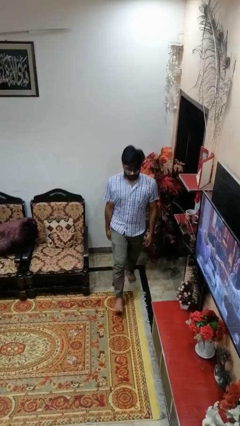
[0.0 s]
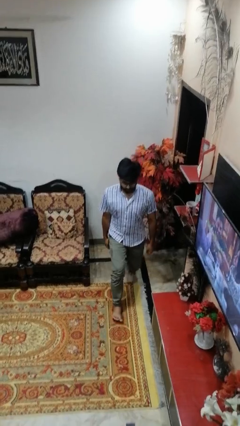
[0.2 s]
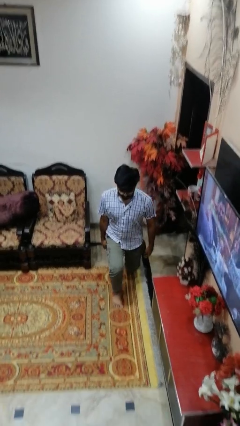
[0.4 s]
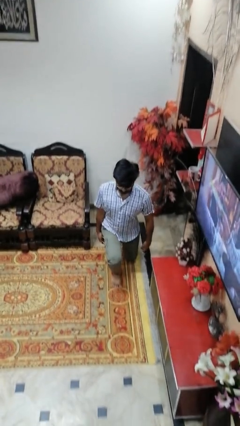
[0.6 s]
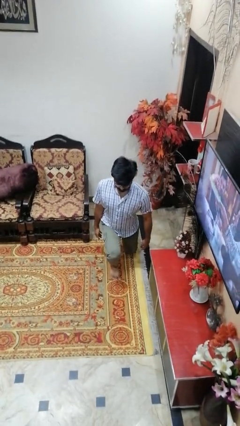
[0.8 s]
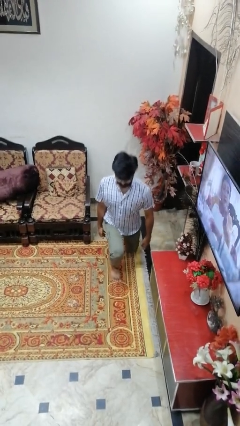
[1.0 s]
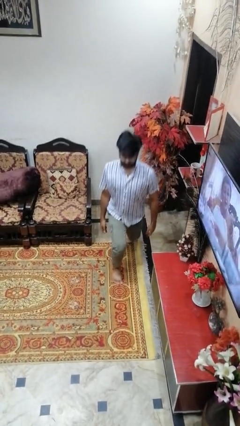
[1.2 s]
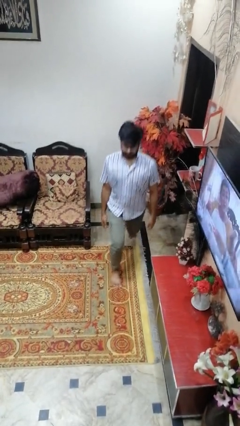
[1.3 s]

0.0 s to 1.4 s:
person exercises with lunges

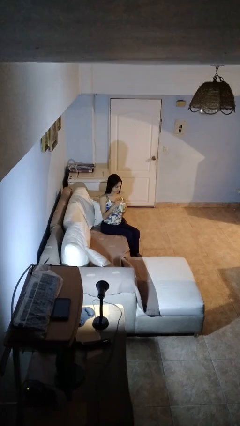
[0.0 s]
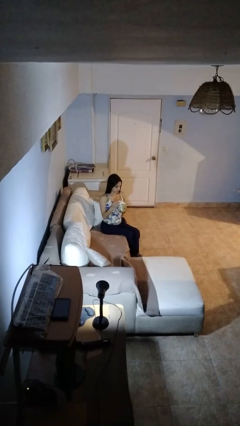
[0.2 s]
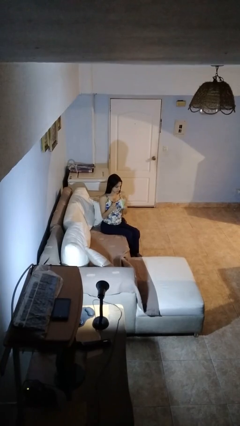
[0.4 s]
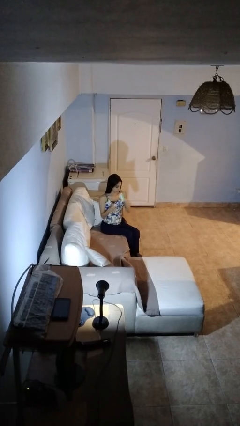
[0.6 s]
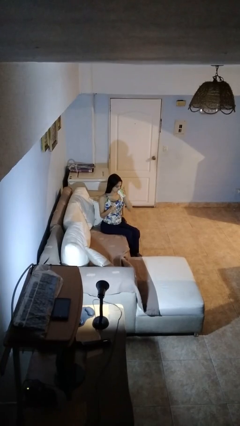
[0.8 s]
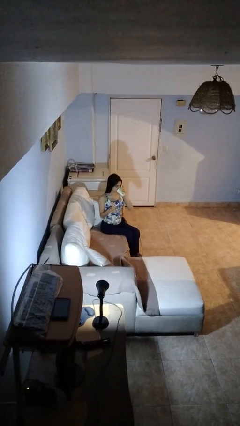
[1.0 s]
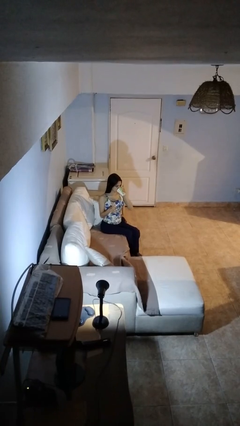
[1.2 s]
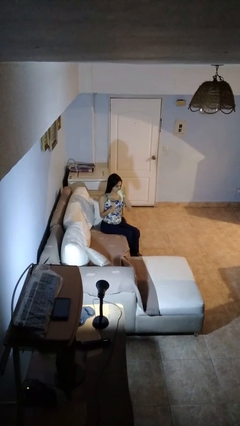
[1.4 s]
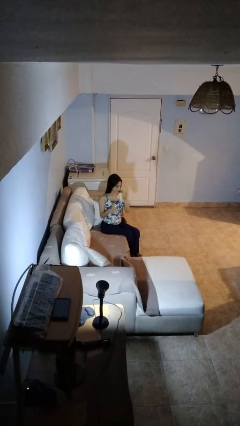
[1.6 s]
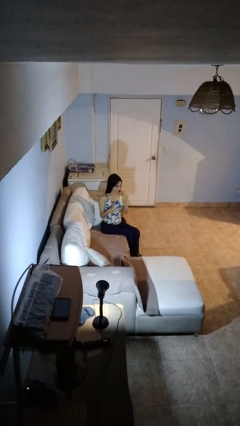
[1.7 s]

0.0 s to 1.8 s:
person drinks from mug

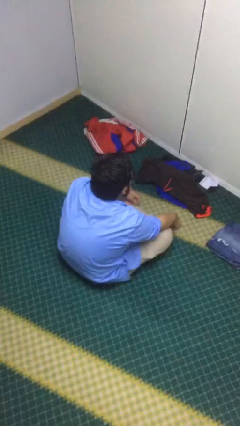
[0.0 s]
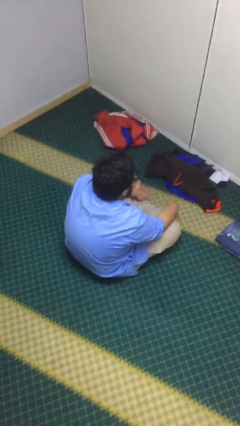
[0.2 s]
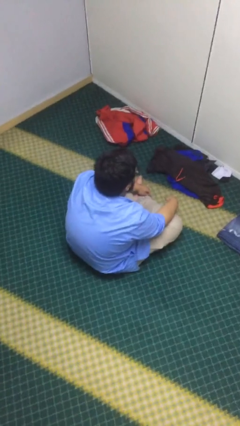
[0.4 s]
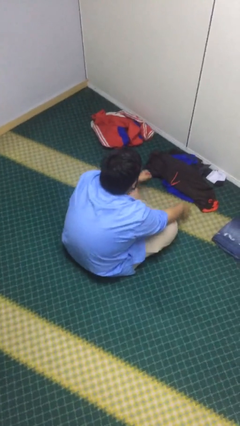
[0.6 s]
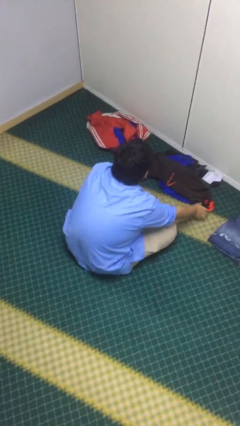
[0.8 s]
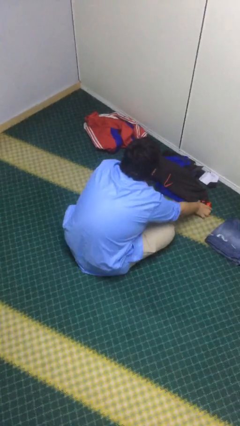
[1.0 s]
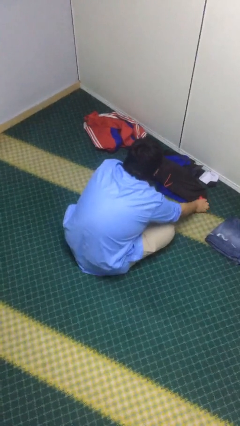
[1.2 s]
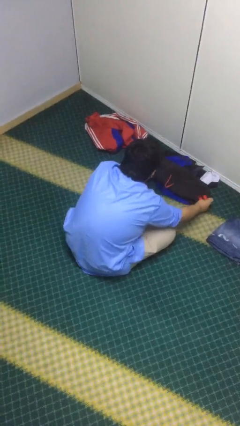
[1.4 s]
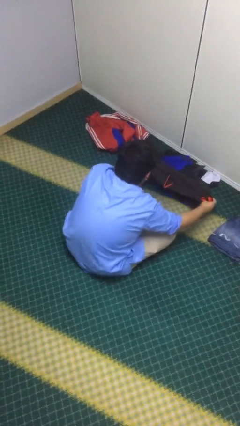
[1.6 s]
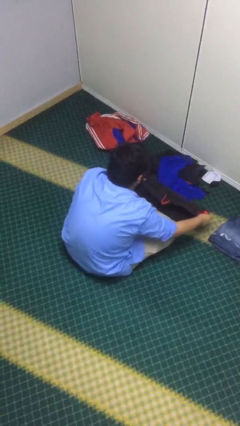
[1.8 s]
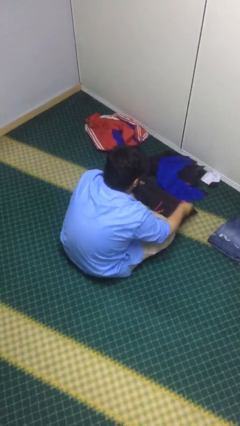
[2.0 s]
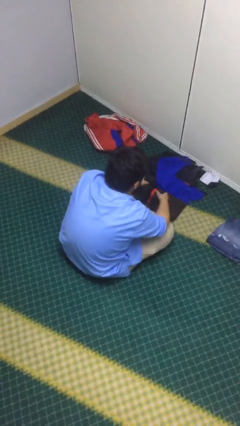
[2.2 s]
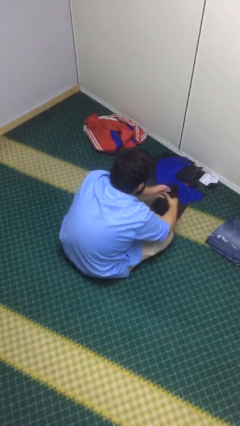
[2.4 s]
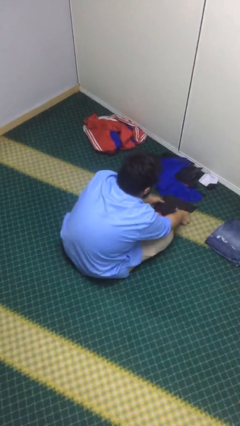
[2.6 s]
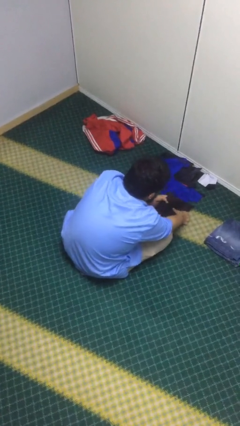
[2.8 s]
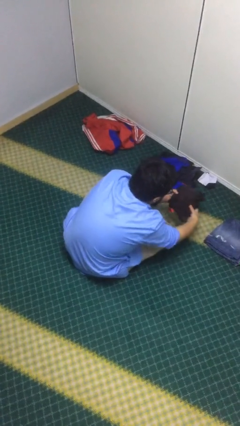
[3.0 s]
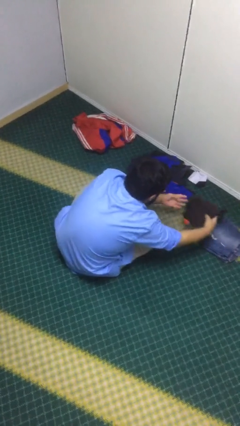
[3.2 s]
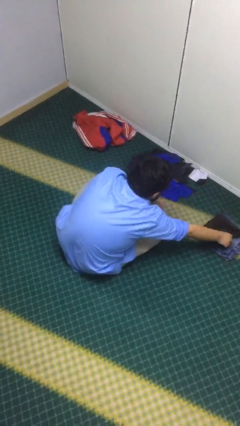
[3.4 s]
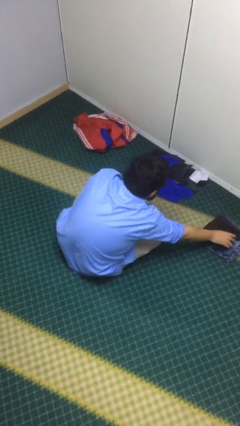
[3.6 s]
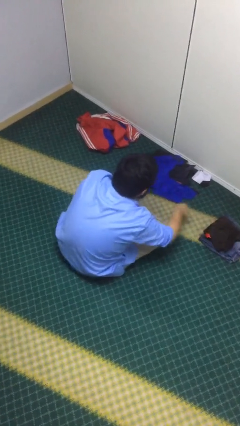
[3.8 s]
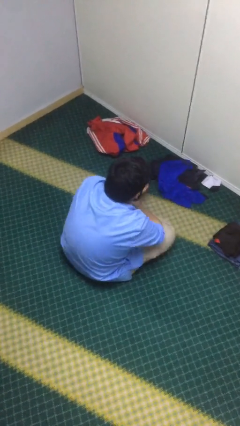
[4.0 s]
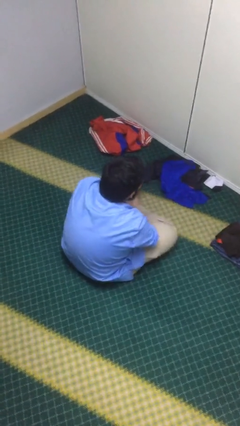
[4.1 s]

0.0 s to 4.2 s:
person folds shirt

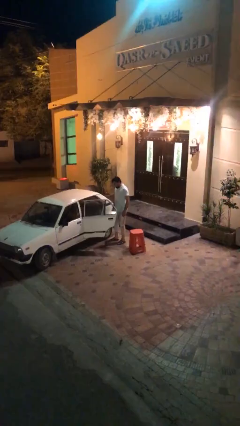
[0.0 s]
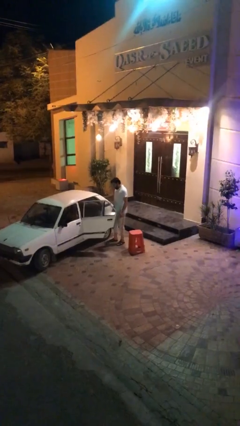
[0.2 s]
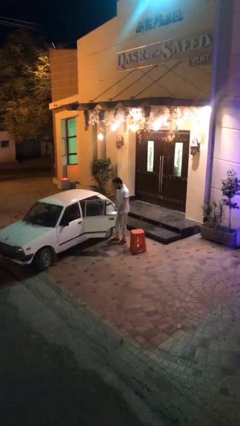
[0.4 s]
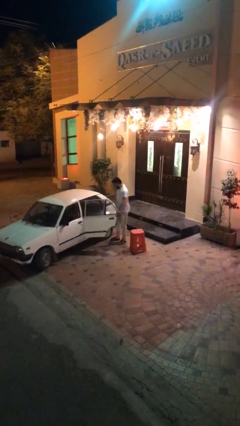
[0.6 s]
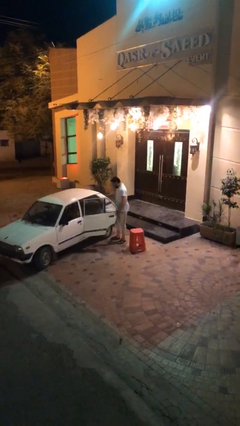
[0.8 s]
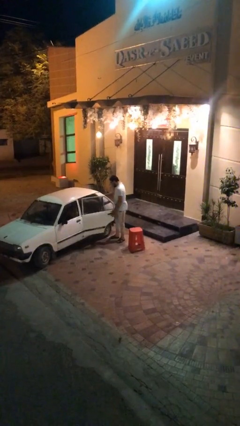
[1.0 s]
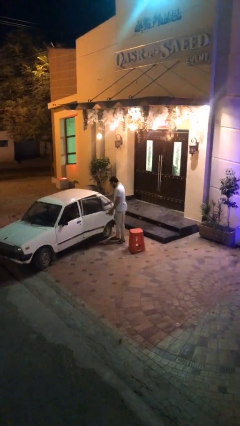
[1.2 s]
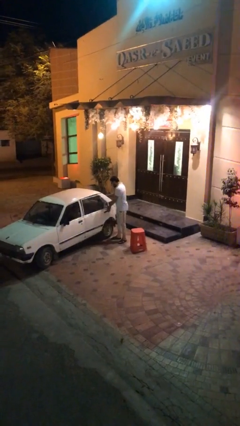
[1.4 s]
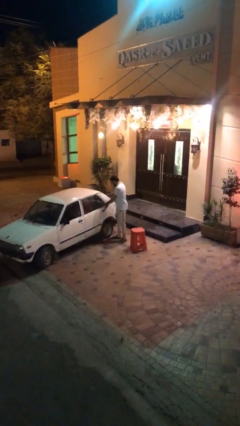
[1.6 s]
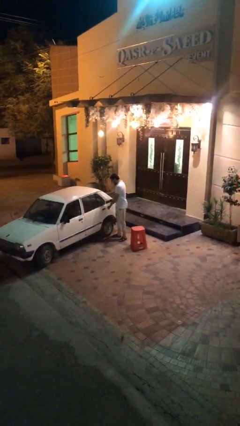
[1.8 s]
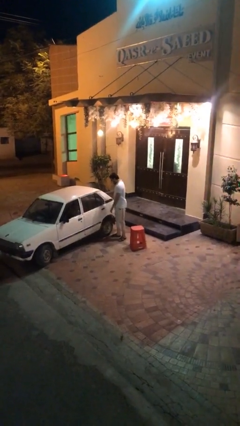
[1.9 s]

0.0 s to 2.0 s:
person closes car door

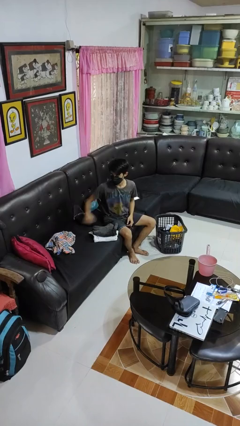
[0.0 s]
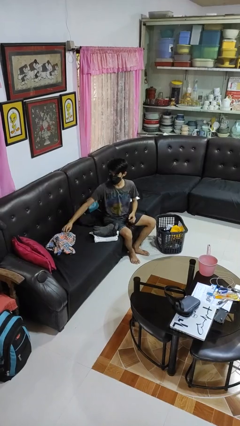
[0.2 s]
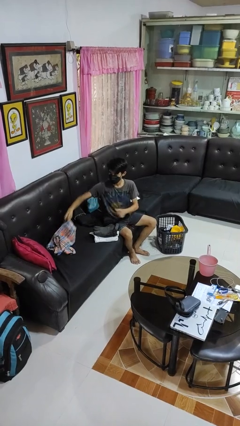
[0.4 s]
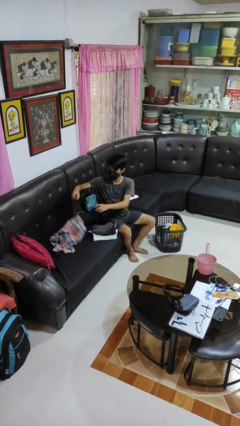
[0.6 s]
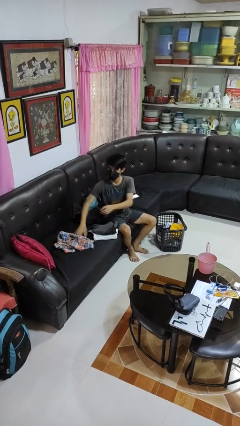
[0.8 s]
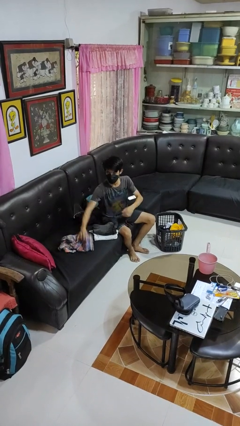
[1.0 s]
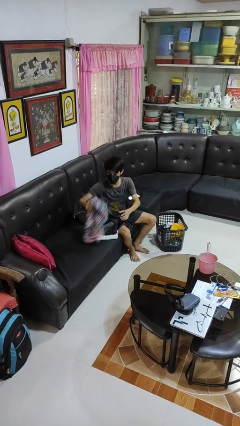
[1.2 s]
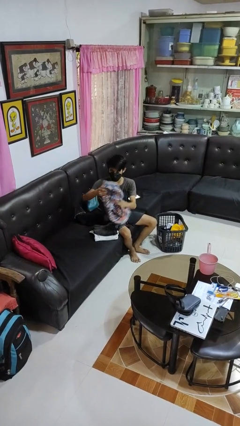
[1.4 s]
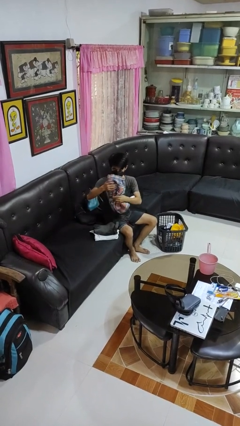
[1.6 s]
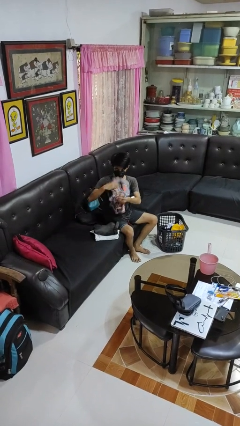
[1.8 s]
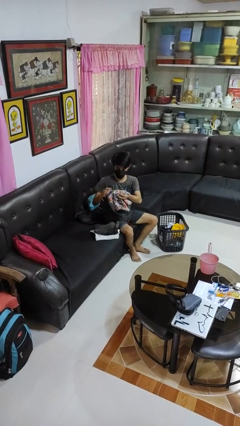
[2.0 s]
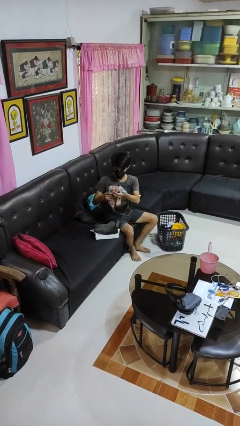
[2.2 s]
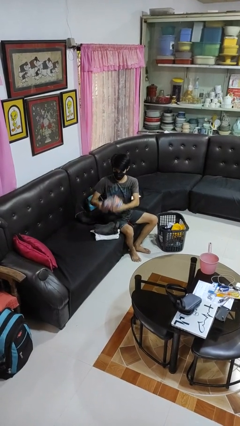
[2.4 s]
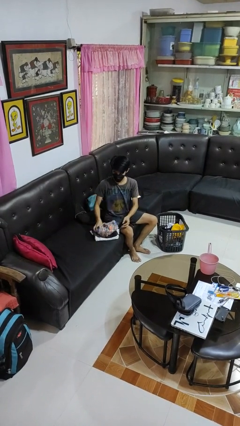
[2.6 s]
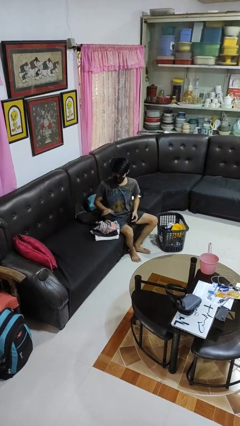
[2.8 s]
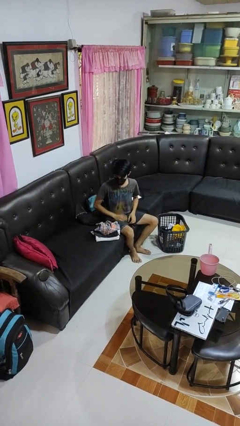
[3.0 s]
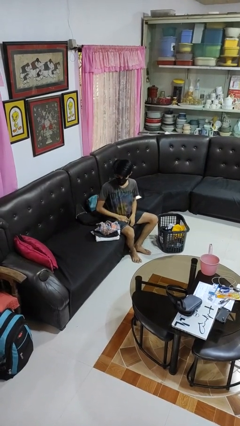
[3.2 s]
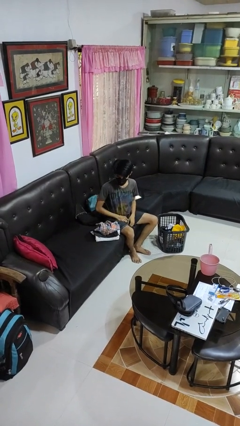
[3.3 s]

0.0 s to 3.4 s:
person folds pants

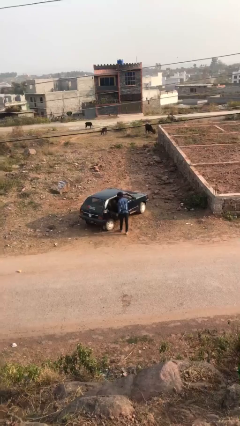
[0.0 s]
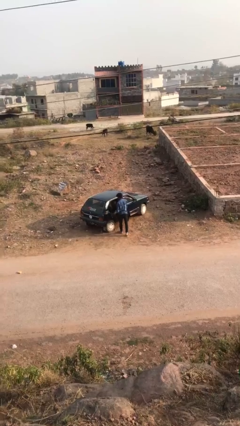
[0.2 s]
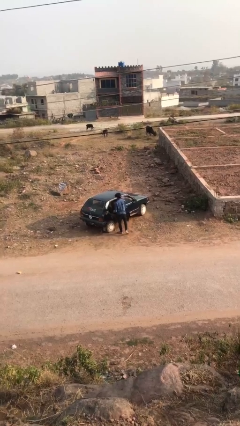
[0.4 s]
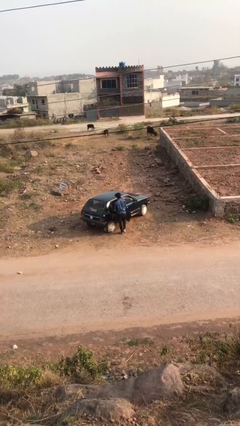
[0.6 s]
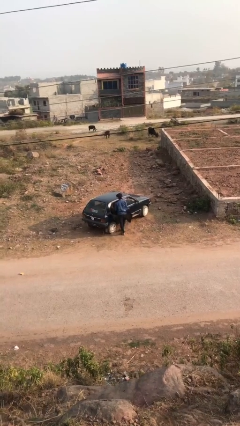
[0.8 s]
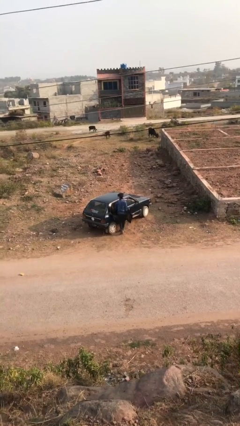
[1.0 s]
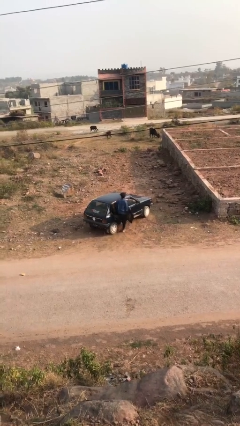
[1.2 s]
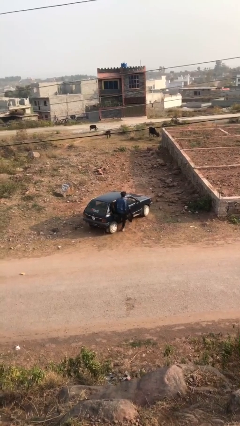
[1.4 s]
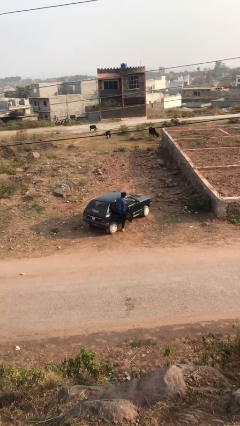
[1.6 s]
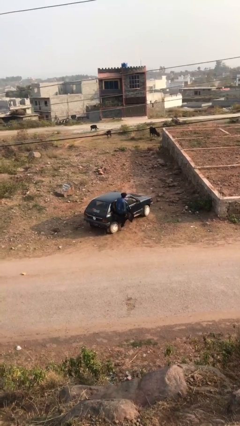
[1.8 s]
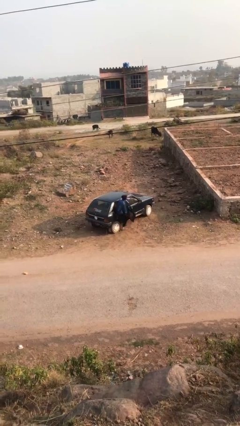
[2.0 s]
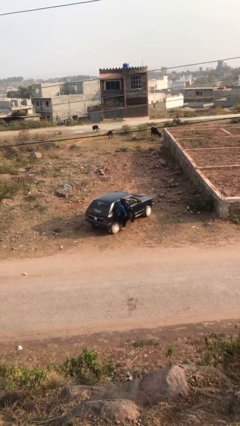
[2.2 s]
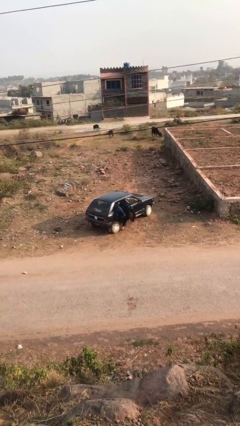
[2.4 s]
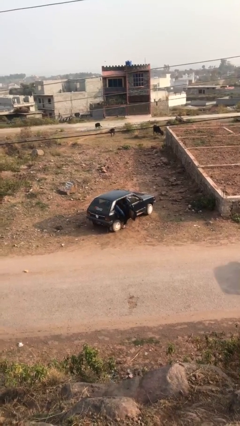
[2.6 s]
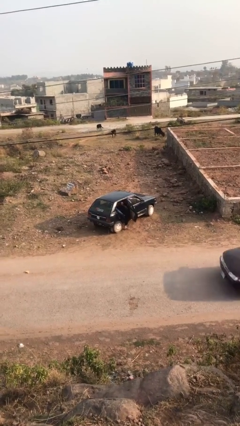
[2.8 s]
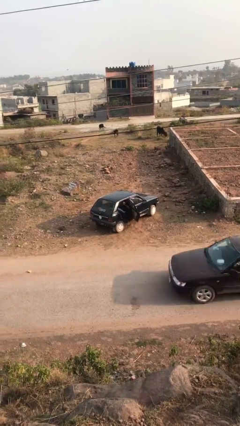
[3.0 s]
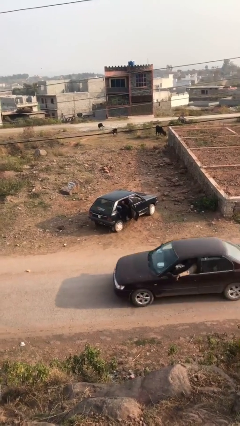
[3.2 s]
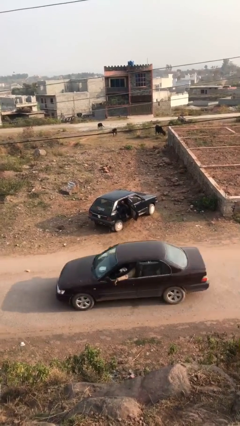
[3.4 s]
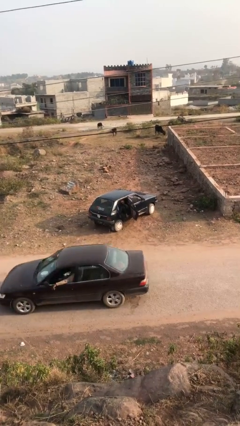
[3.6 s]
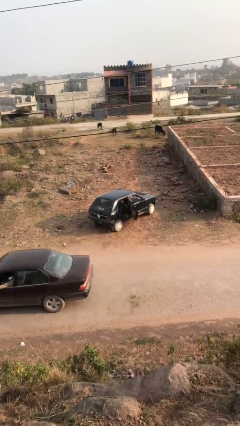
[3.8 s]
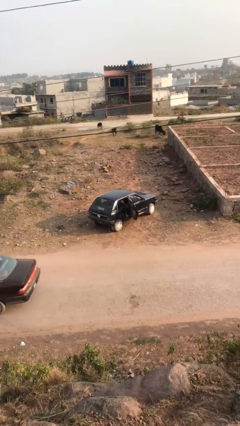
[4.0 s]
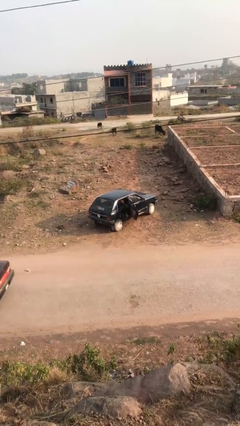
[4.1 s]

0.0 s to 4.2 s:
person enters car

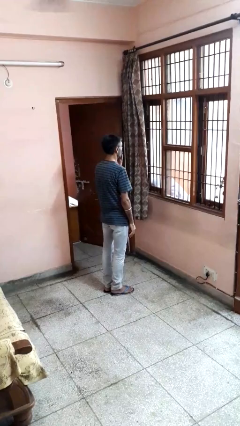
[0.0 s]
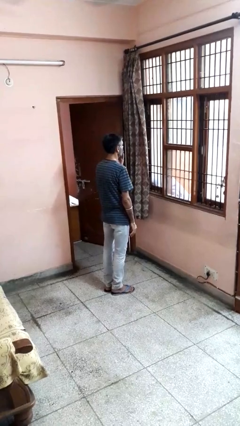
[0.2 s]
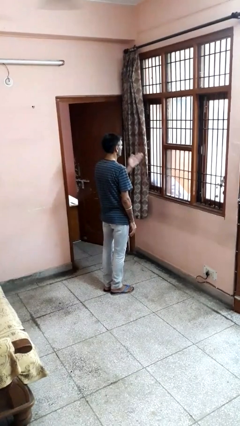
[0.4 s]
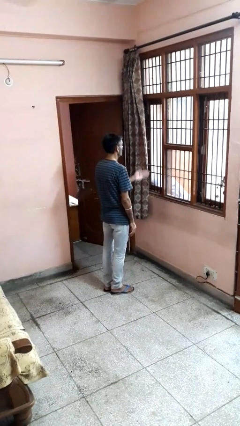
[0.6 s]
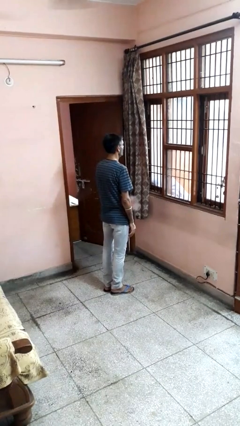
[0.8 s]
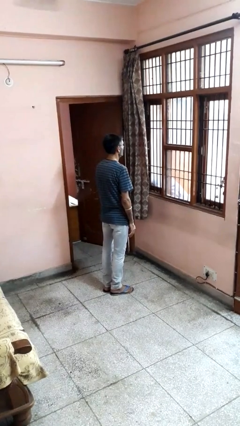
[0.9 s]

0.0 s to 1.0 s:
person gestures blow kiss
